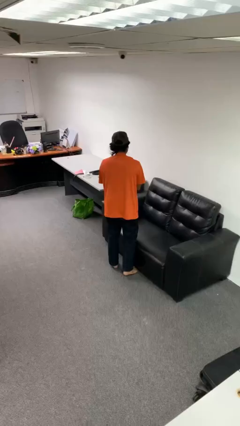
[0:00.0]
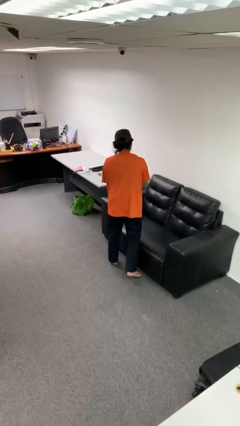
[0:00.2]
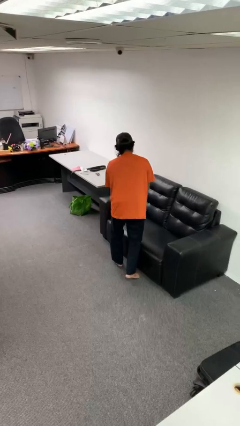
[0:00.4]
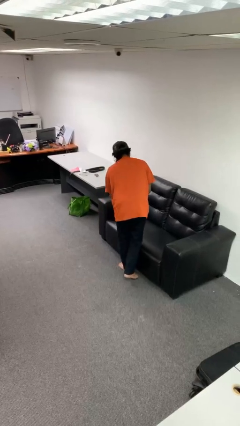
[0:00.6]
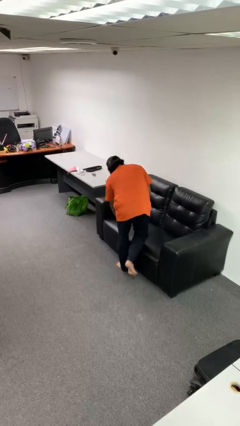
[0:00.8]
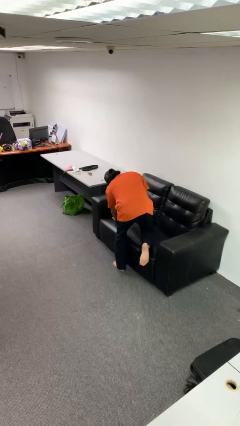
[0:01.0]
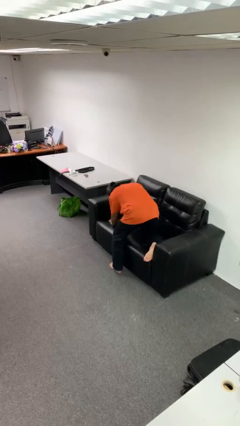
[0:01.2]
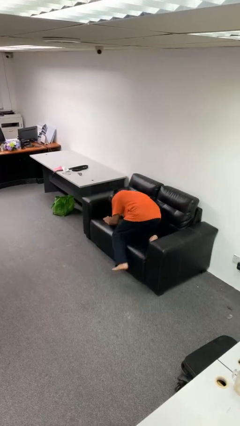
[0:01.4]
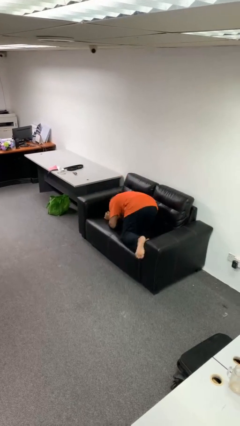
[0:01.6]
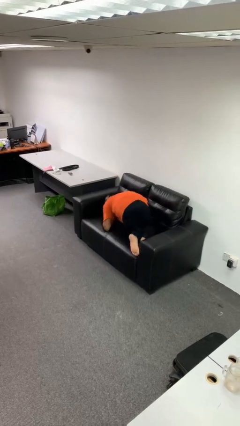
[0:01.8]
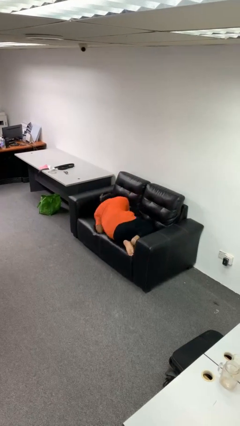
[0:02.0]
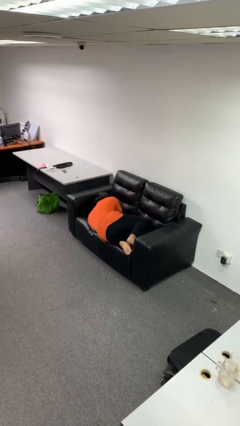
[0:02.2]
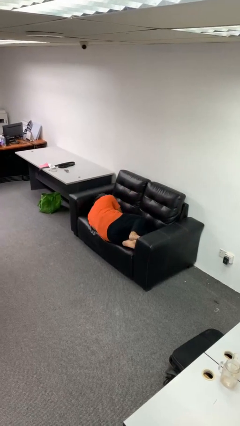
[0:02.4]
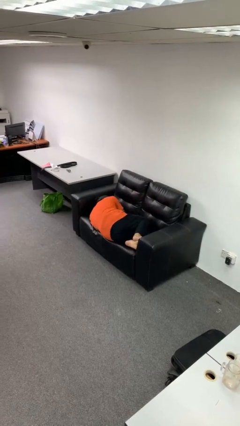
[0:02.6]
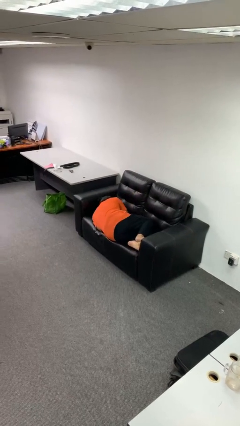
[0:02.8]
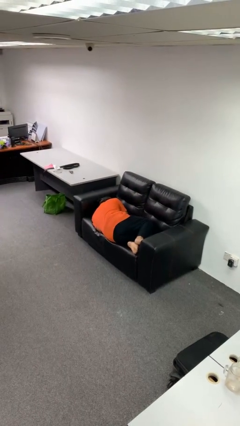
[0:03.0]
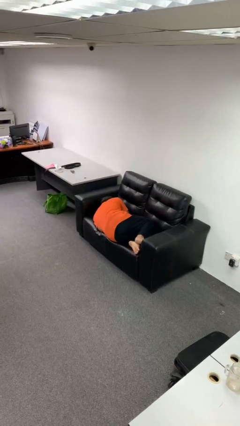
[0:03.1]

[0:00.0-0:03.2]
person lies down on couch

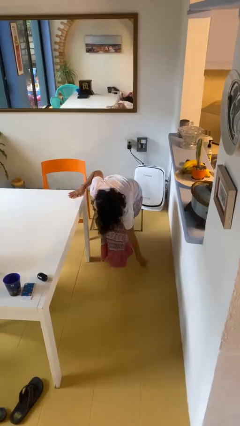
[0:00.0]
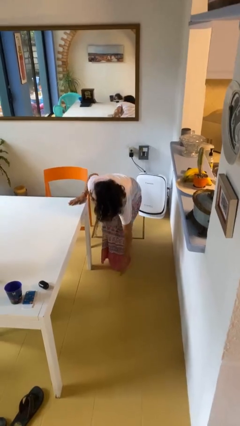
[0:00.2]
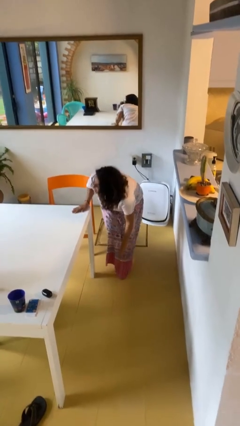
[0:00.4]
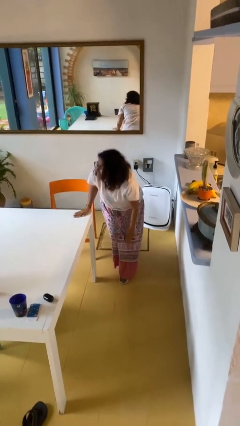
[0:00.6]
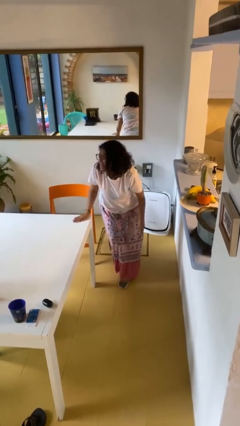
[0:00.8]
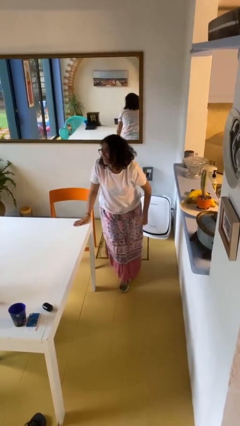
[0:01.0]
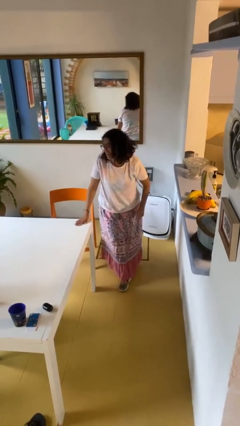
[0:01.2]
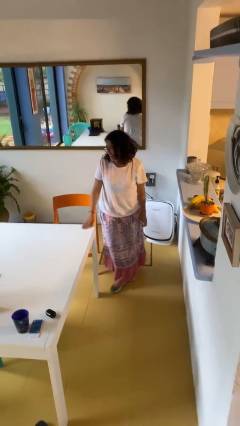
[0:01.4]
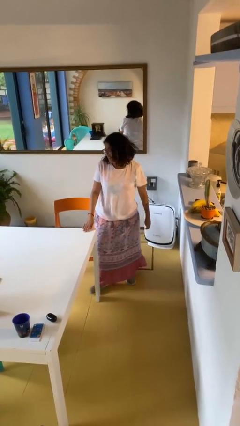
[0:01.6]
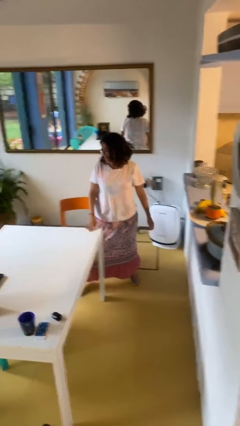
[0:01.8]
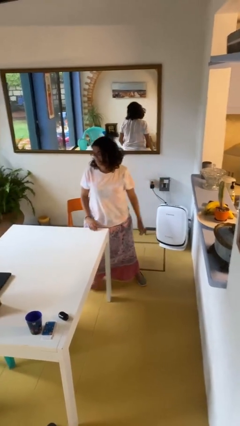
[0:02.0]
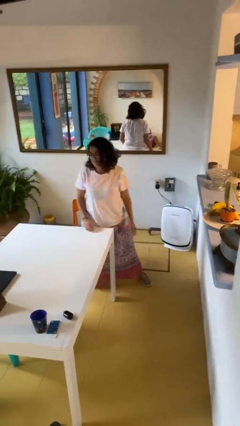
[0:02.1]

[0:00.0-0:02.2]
person stands up from floor

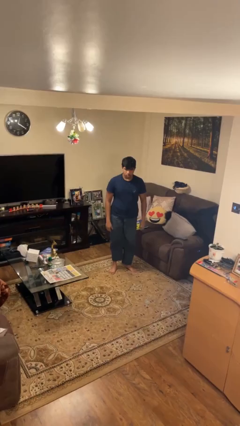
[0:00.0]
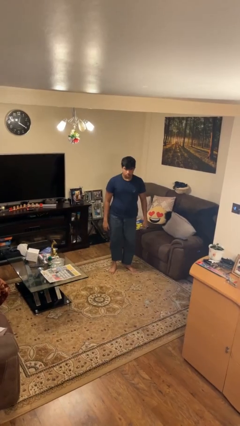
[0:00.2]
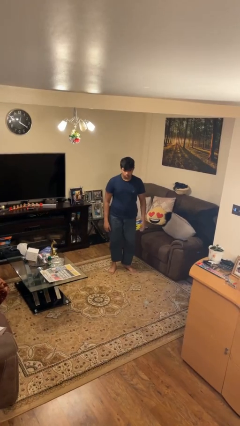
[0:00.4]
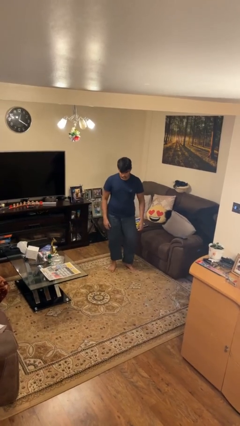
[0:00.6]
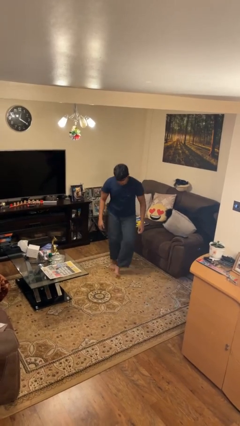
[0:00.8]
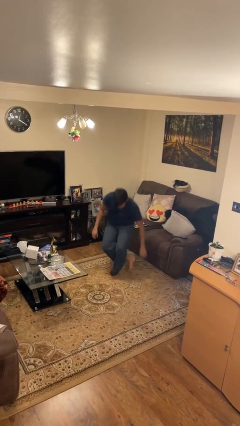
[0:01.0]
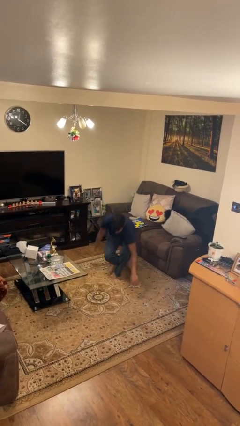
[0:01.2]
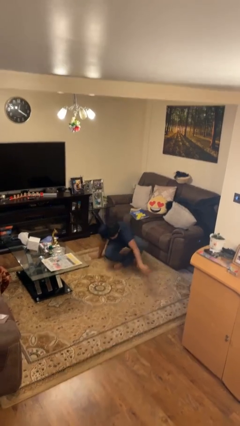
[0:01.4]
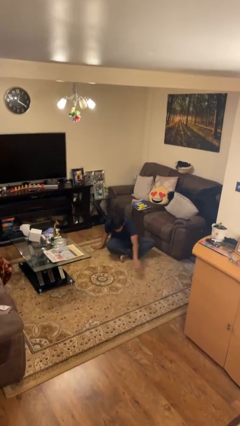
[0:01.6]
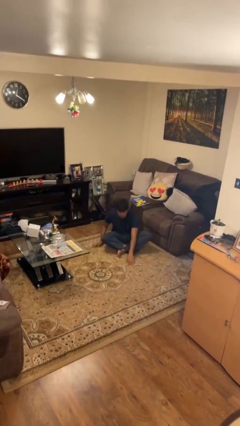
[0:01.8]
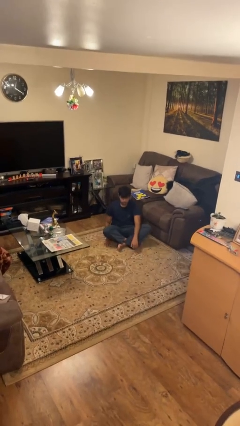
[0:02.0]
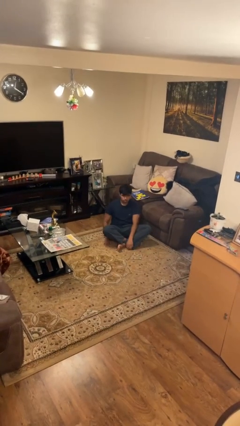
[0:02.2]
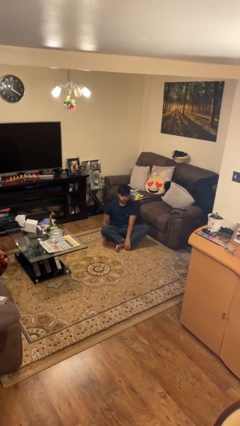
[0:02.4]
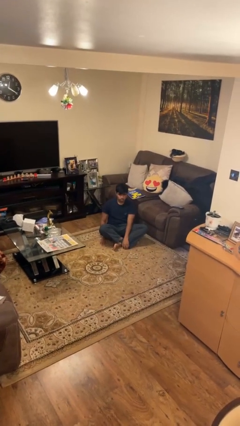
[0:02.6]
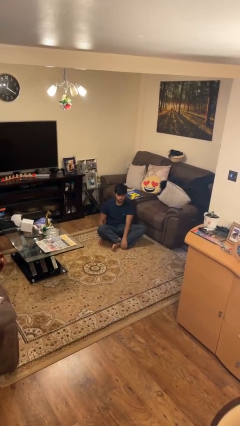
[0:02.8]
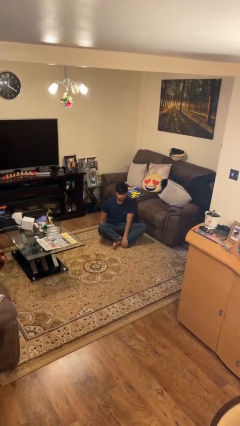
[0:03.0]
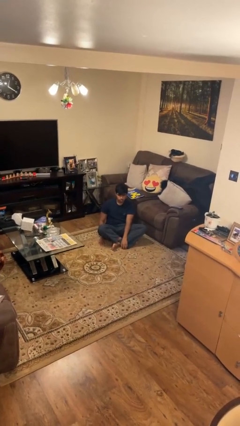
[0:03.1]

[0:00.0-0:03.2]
person sits crisscross

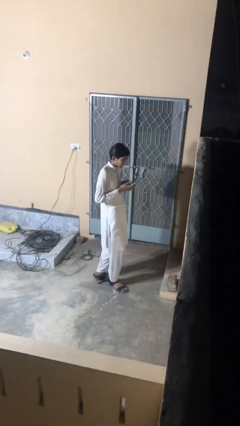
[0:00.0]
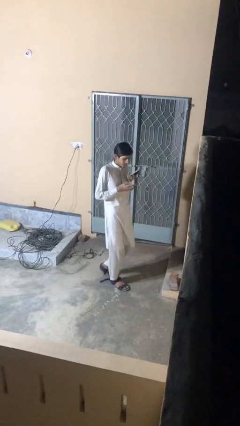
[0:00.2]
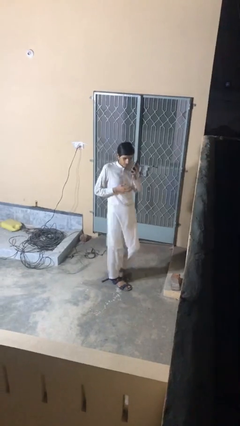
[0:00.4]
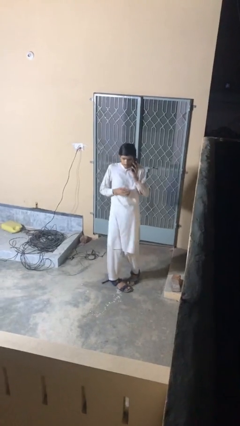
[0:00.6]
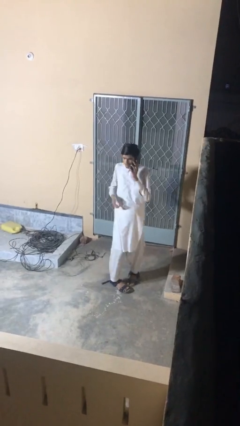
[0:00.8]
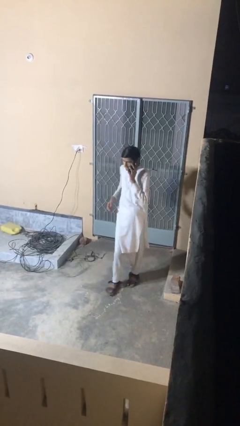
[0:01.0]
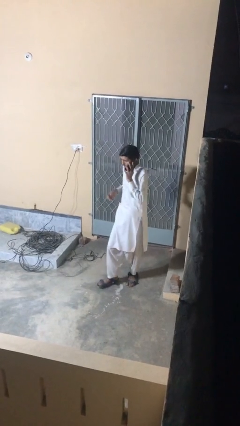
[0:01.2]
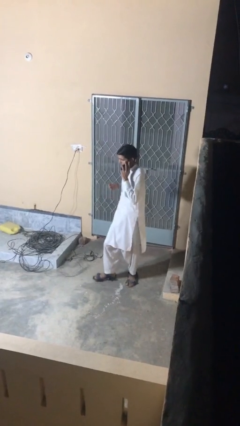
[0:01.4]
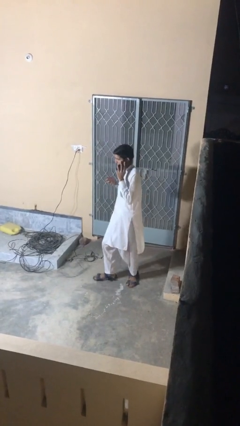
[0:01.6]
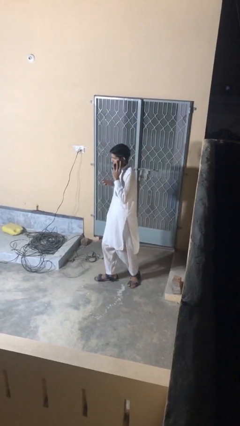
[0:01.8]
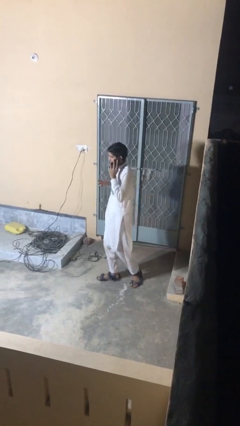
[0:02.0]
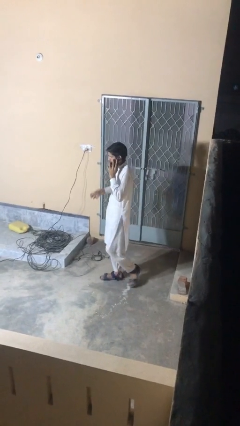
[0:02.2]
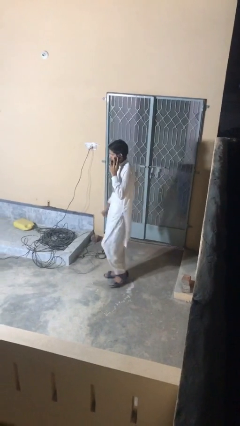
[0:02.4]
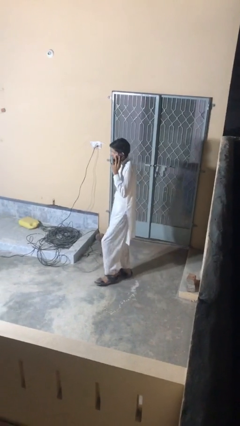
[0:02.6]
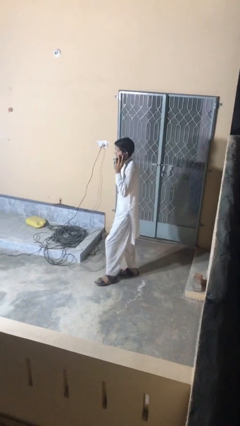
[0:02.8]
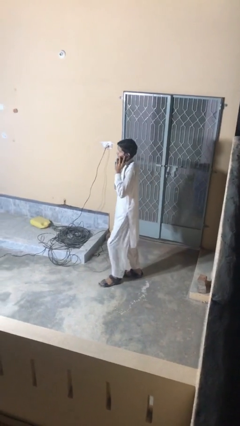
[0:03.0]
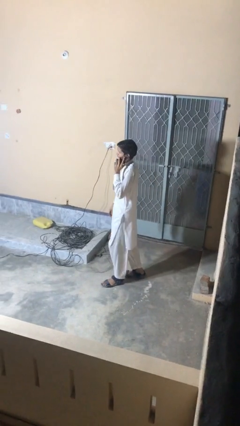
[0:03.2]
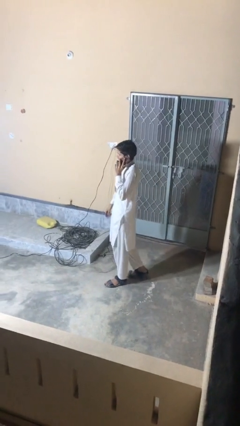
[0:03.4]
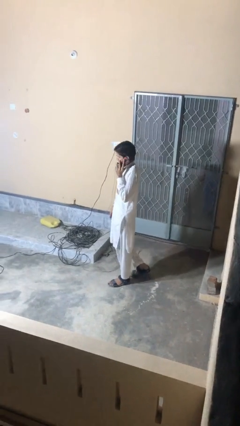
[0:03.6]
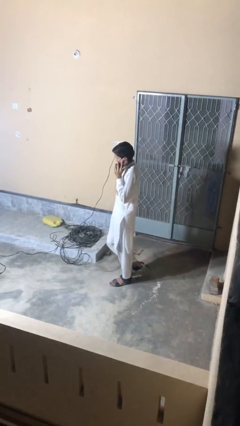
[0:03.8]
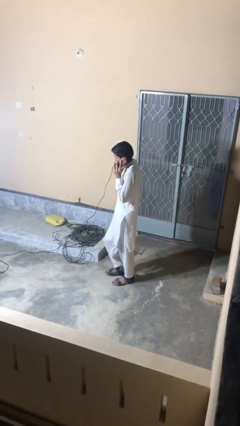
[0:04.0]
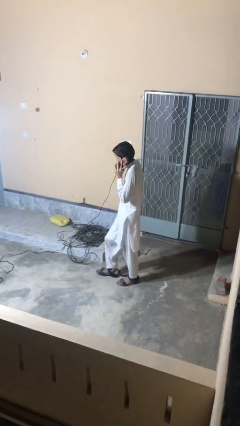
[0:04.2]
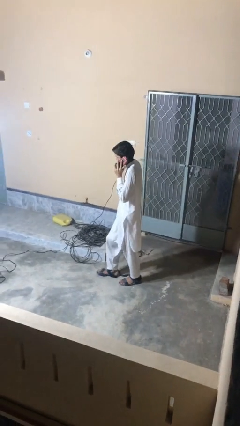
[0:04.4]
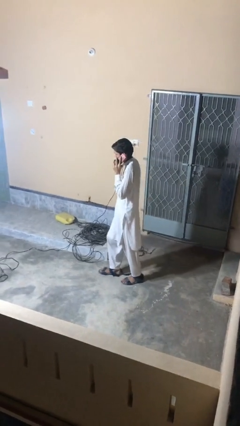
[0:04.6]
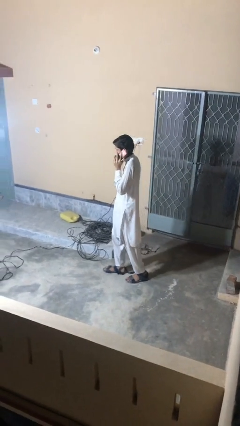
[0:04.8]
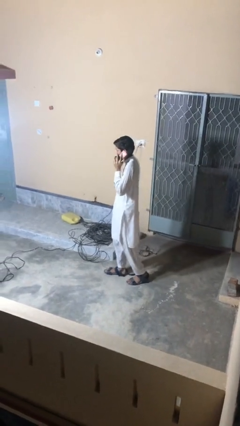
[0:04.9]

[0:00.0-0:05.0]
person talks on phone

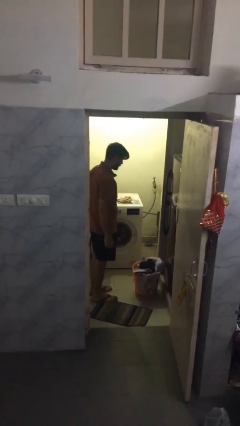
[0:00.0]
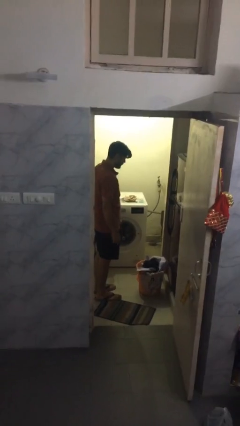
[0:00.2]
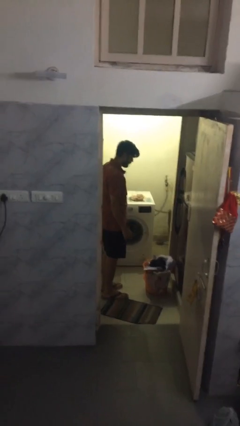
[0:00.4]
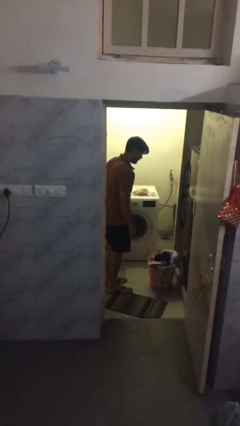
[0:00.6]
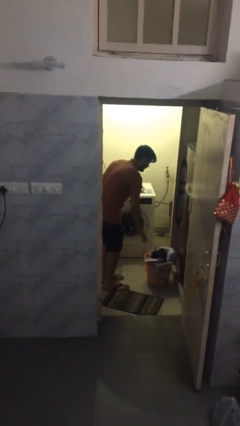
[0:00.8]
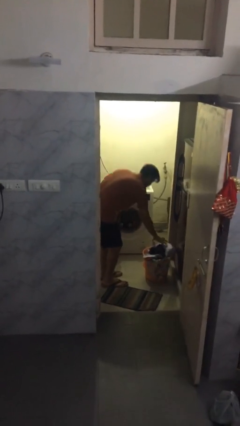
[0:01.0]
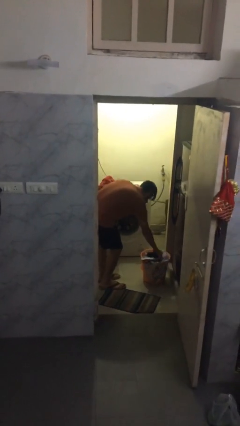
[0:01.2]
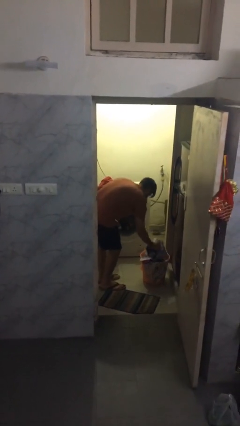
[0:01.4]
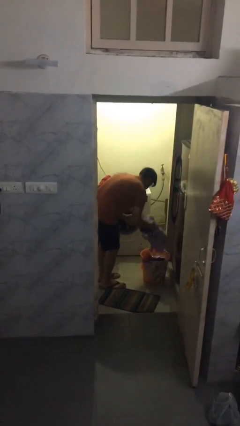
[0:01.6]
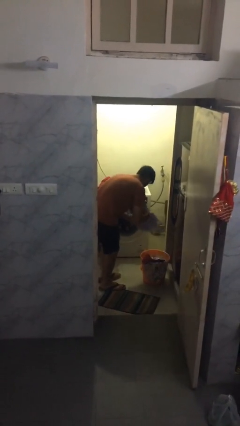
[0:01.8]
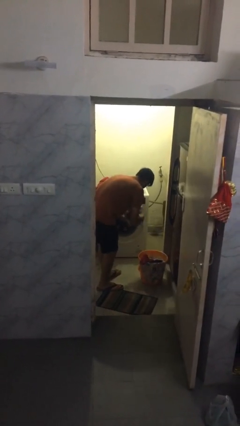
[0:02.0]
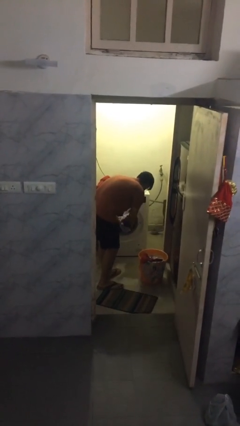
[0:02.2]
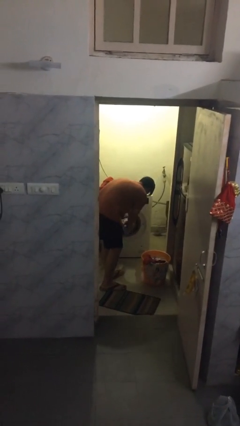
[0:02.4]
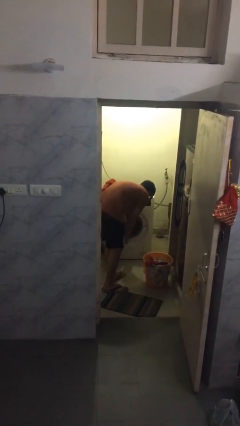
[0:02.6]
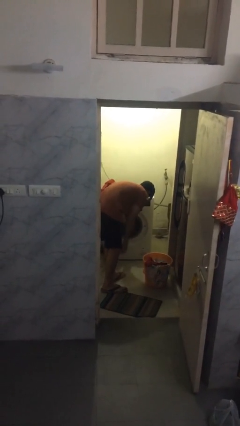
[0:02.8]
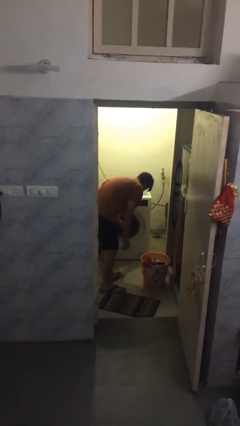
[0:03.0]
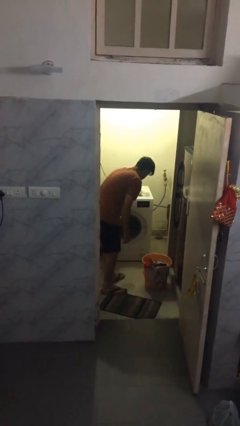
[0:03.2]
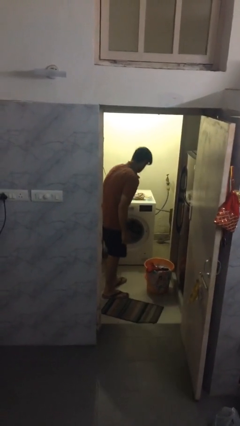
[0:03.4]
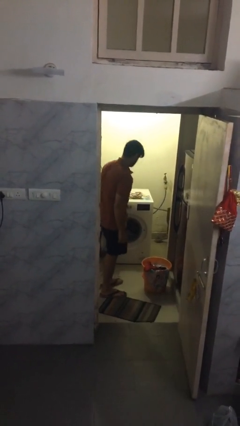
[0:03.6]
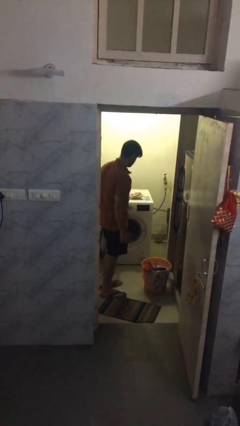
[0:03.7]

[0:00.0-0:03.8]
person loads dryer

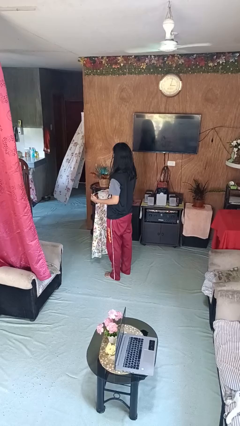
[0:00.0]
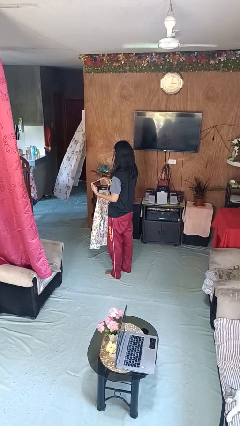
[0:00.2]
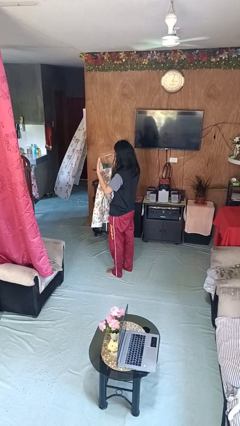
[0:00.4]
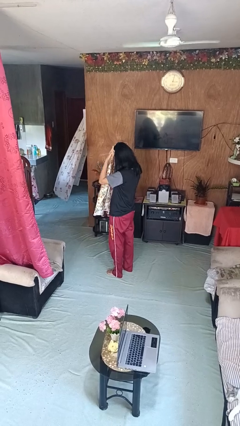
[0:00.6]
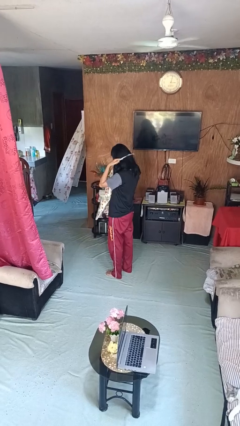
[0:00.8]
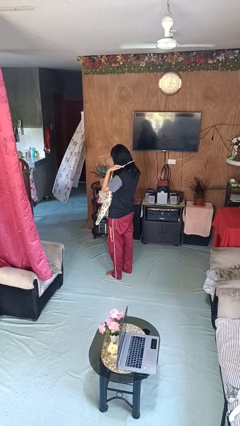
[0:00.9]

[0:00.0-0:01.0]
person puts on apron
